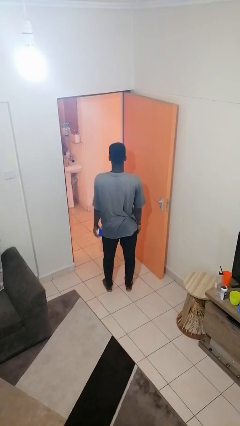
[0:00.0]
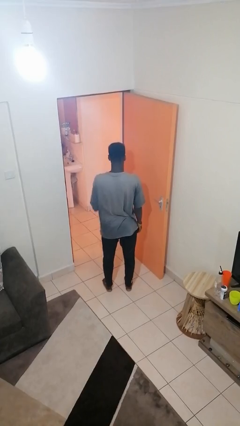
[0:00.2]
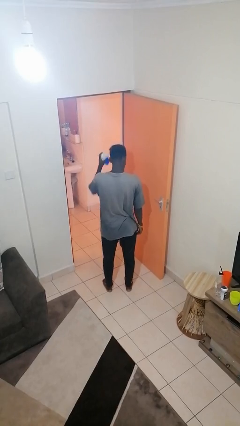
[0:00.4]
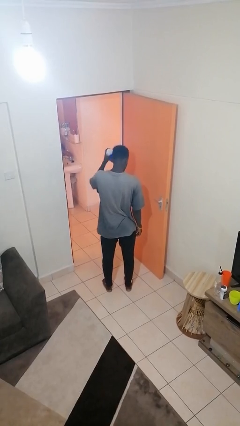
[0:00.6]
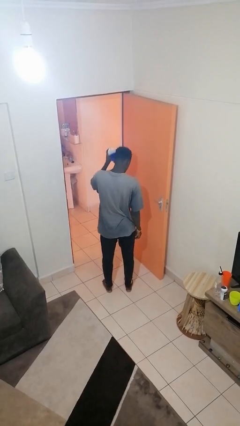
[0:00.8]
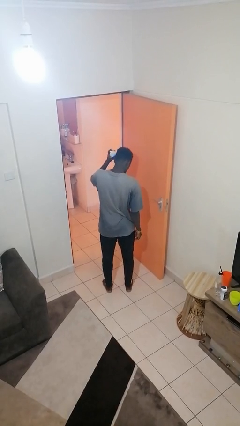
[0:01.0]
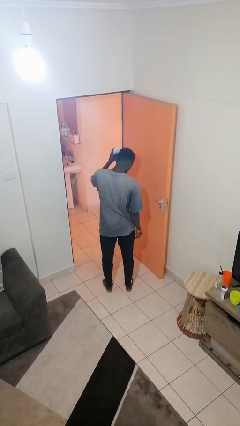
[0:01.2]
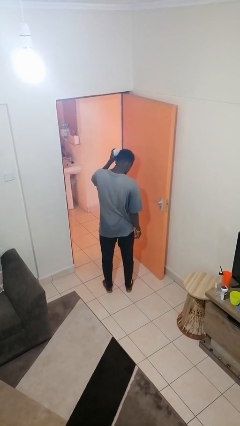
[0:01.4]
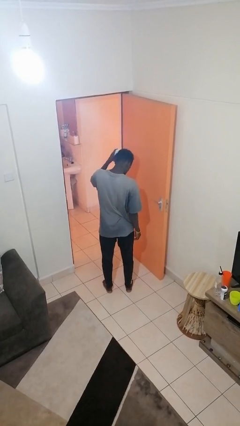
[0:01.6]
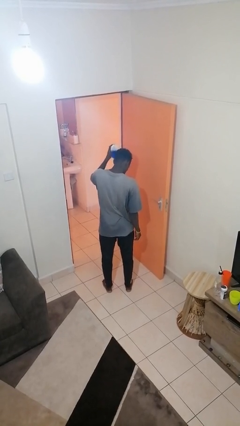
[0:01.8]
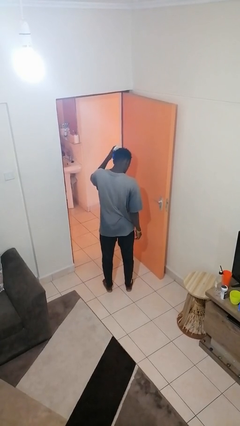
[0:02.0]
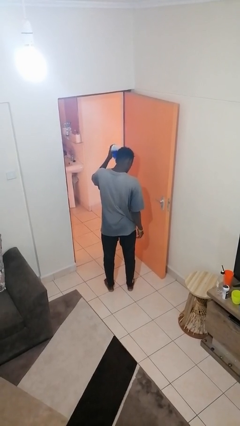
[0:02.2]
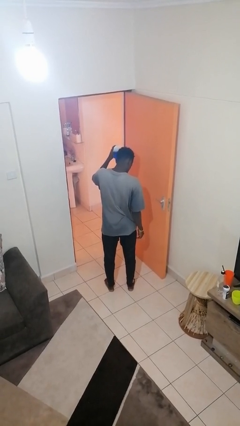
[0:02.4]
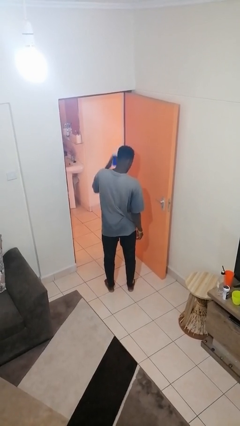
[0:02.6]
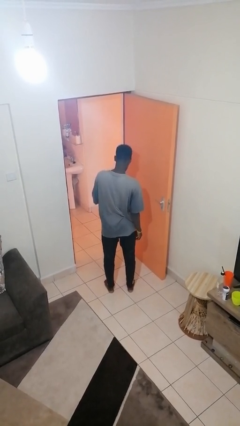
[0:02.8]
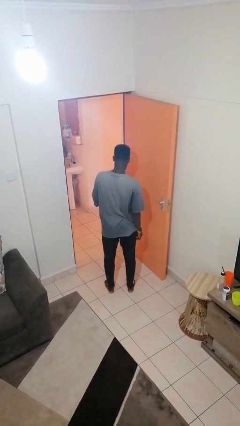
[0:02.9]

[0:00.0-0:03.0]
person brushes hair

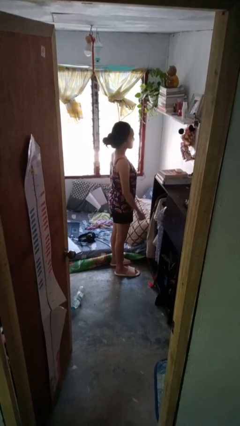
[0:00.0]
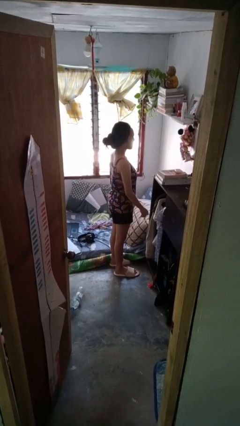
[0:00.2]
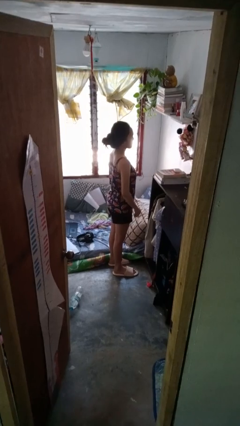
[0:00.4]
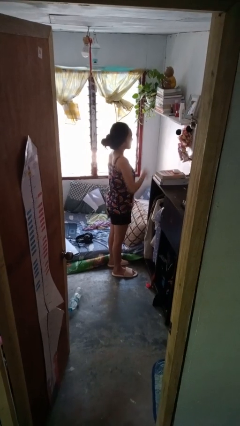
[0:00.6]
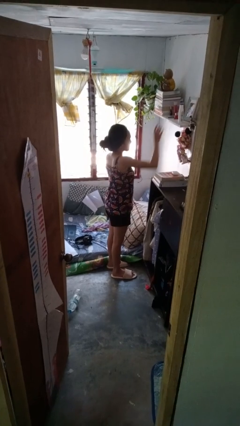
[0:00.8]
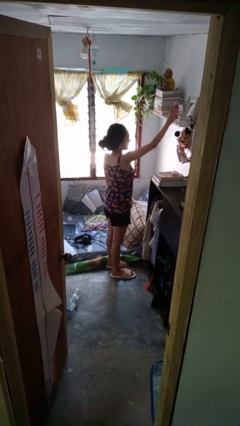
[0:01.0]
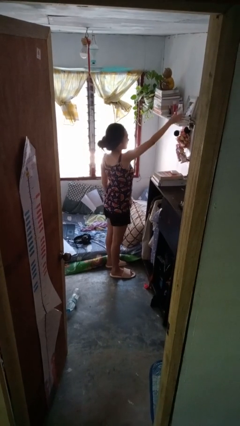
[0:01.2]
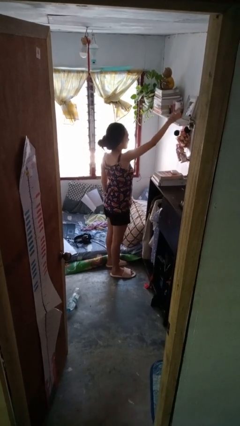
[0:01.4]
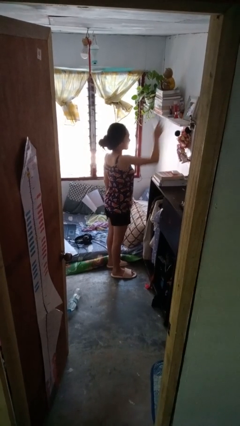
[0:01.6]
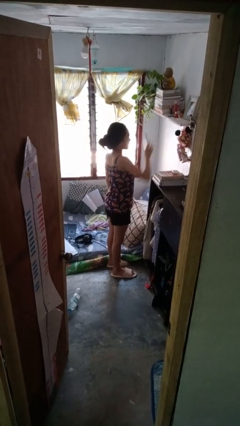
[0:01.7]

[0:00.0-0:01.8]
person picks up object from shelf

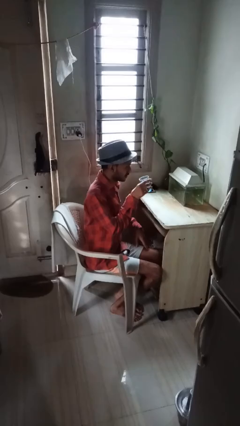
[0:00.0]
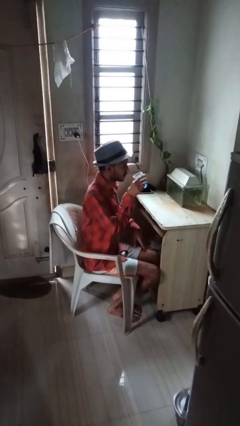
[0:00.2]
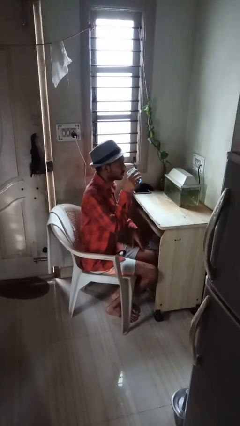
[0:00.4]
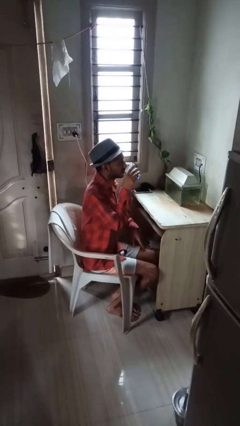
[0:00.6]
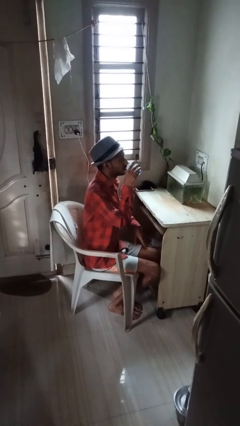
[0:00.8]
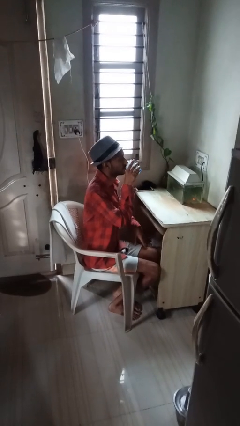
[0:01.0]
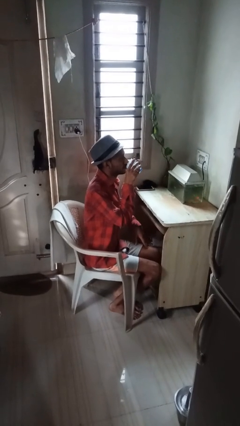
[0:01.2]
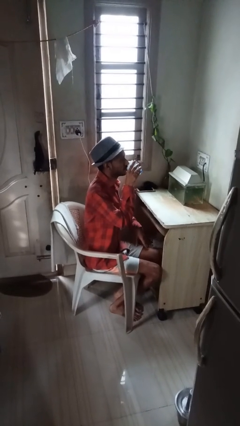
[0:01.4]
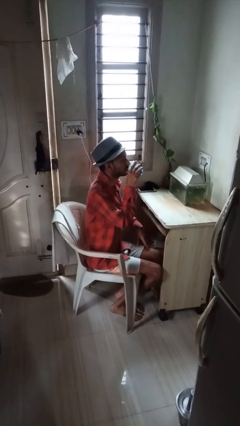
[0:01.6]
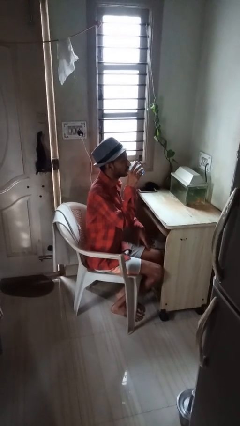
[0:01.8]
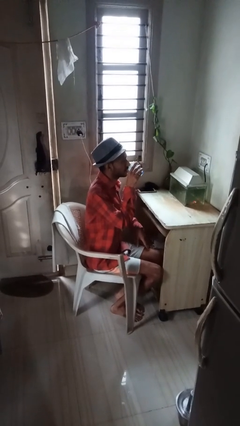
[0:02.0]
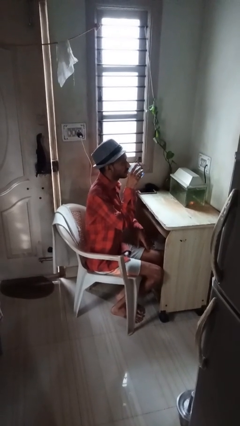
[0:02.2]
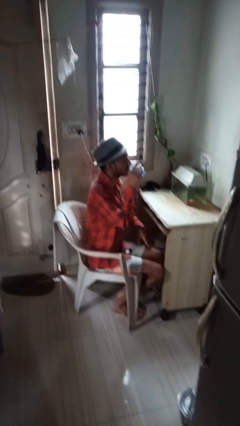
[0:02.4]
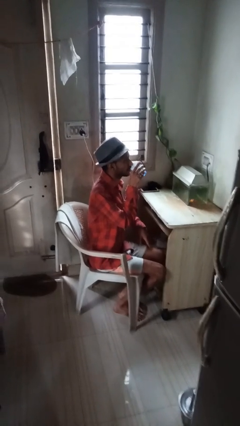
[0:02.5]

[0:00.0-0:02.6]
person drinks from shotglass

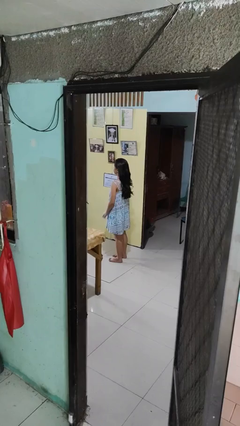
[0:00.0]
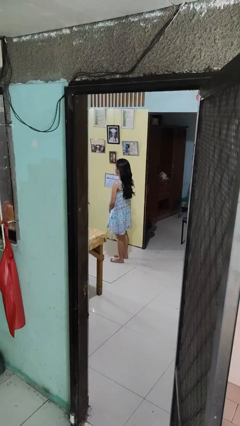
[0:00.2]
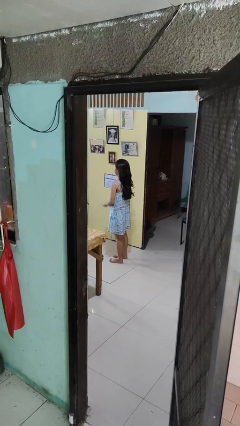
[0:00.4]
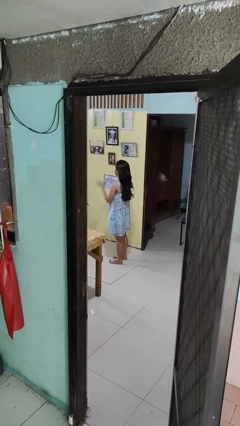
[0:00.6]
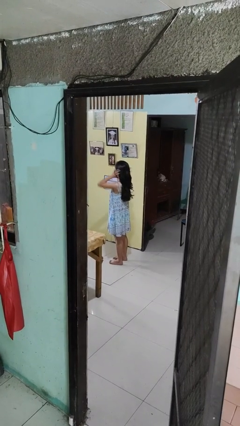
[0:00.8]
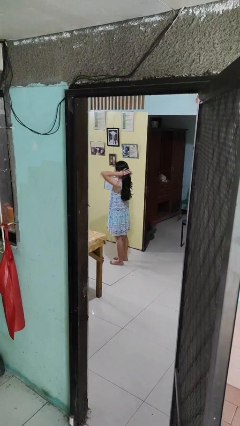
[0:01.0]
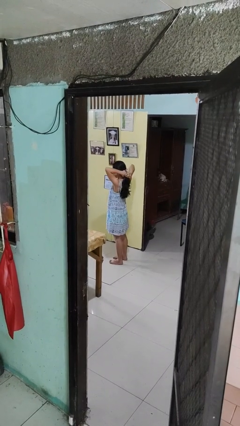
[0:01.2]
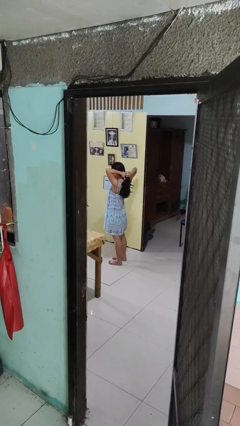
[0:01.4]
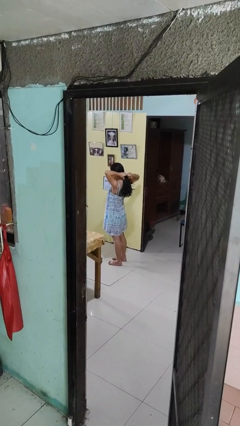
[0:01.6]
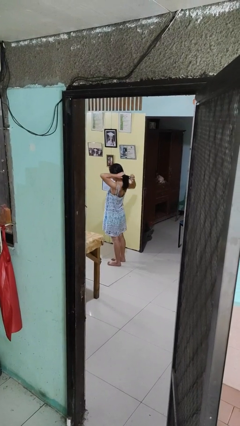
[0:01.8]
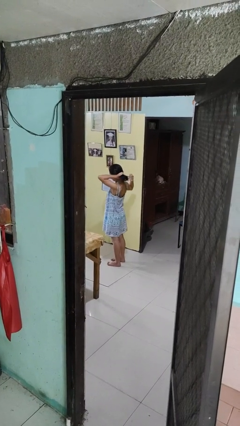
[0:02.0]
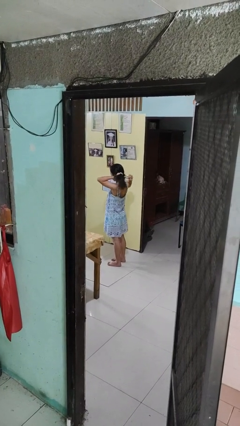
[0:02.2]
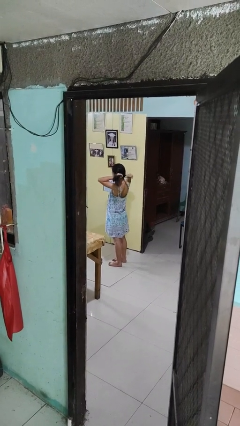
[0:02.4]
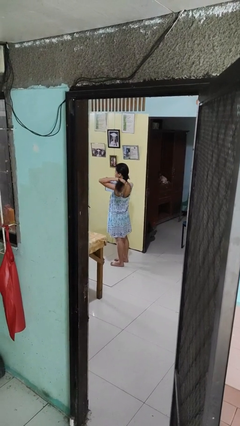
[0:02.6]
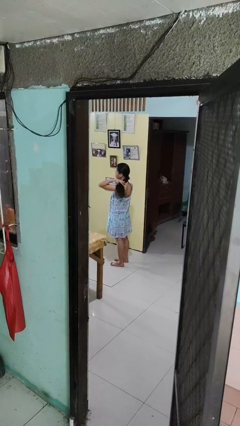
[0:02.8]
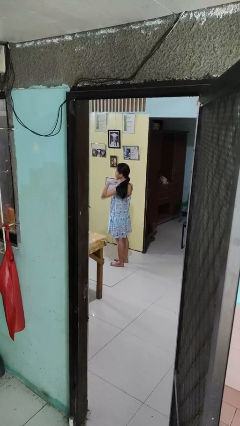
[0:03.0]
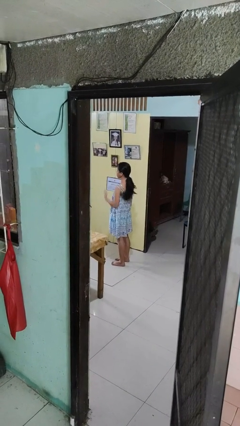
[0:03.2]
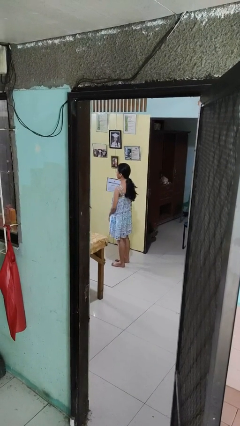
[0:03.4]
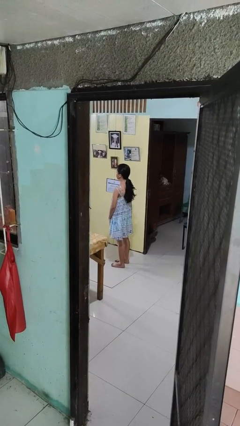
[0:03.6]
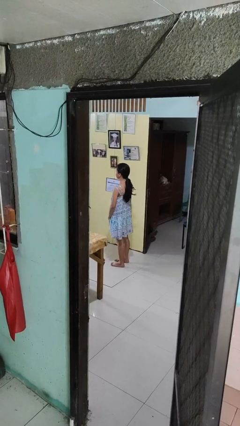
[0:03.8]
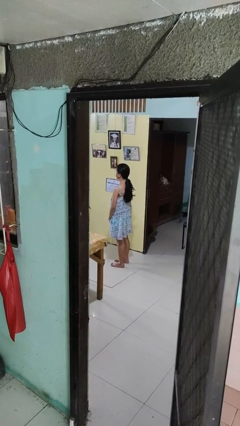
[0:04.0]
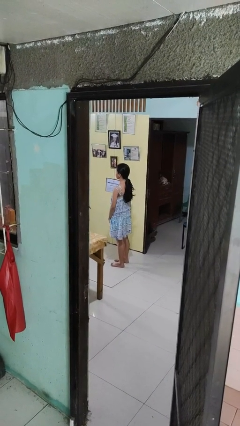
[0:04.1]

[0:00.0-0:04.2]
person puts hair in ponytail

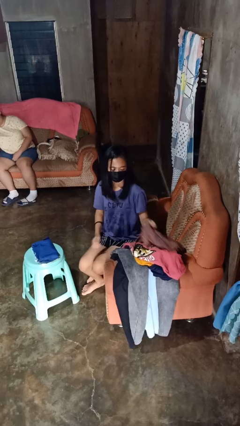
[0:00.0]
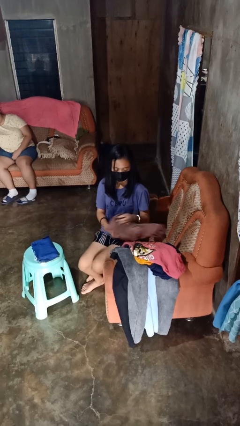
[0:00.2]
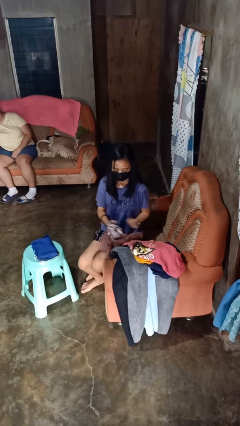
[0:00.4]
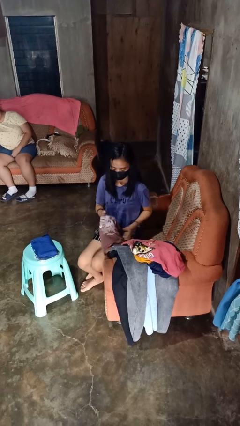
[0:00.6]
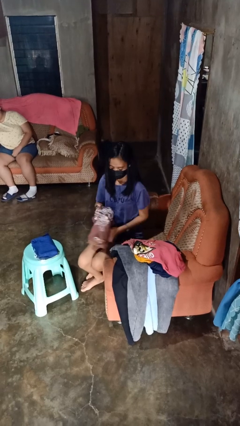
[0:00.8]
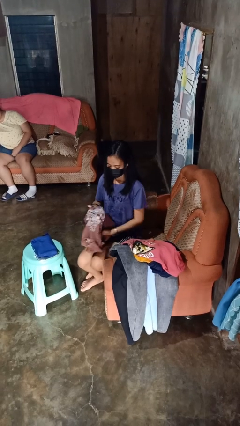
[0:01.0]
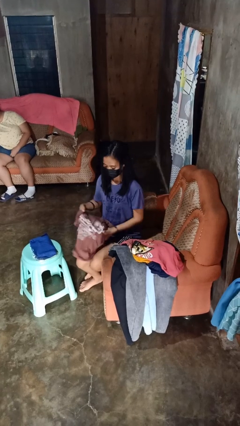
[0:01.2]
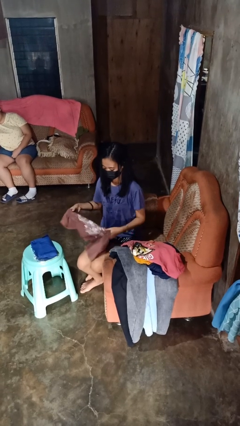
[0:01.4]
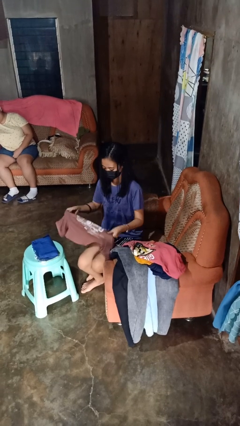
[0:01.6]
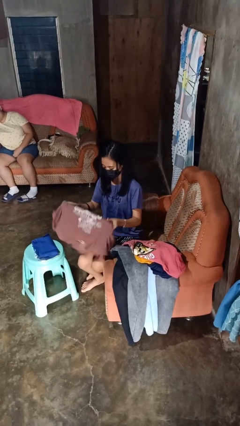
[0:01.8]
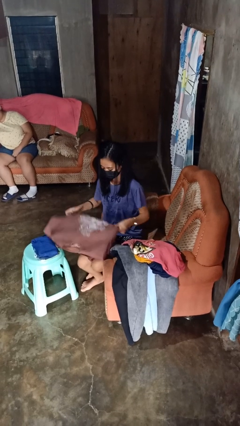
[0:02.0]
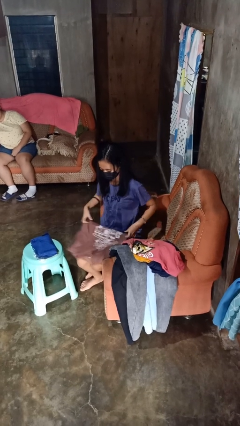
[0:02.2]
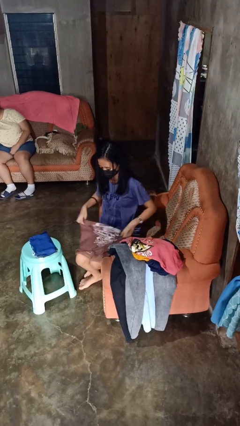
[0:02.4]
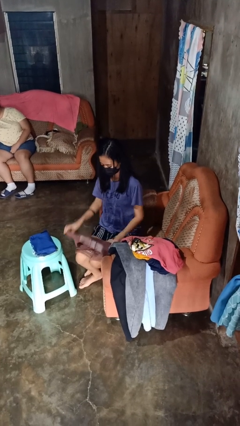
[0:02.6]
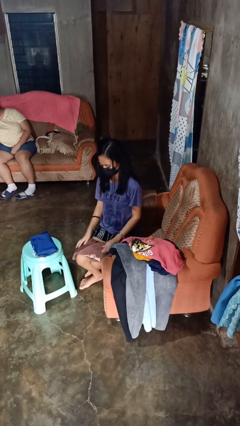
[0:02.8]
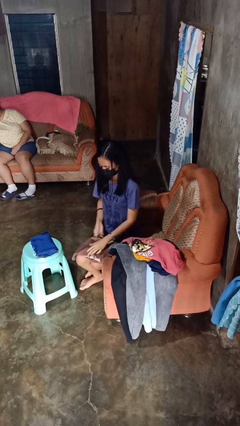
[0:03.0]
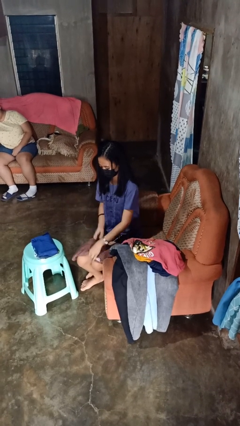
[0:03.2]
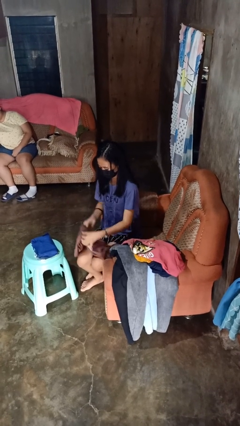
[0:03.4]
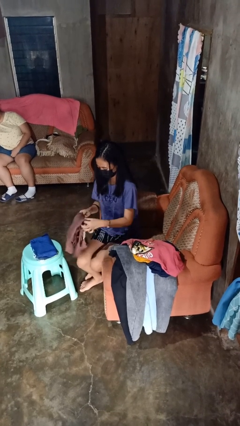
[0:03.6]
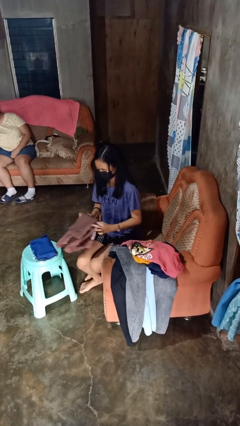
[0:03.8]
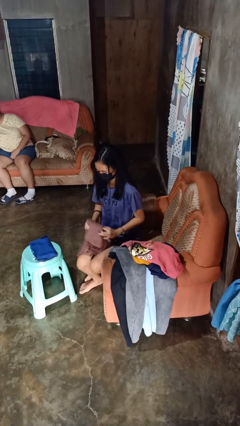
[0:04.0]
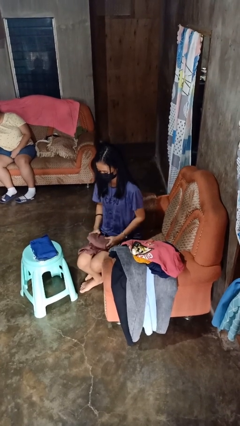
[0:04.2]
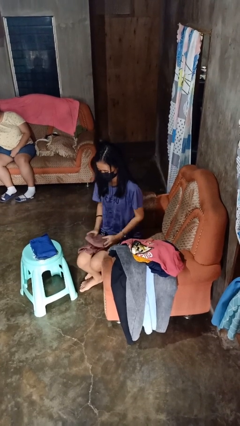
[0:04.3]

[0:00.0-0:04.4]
person folds shirt

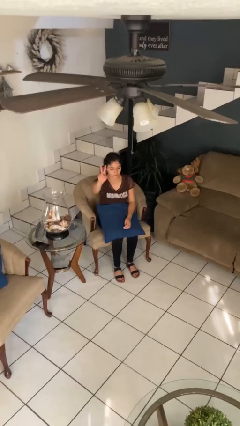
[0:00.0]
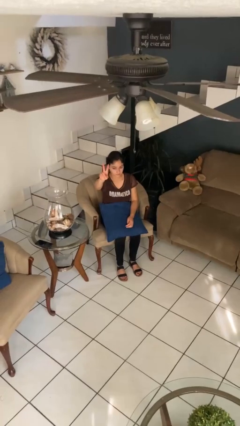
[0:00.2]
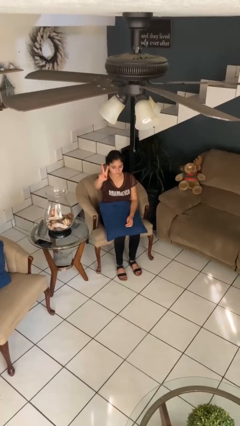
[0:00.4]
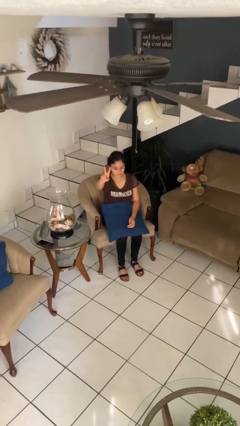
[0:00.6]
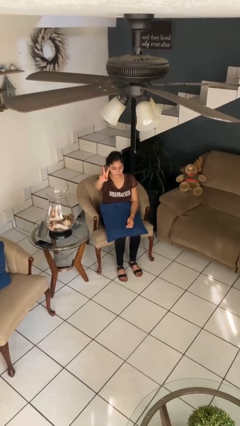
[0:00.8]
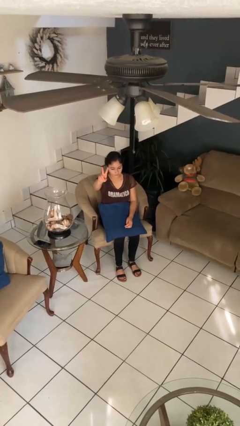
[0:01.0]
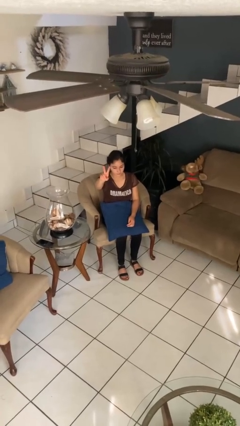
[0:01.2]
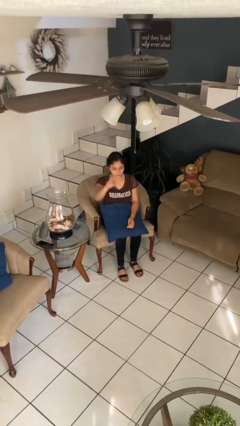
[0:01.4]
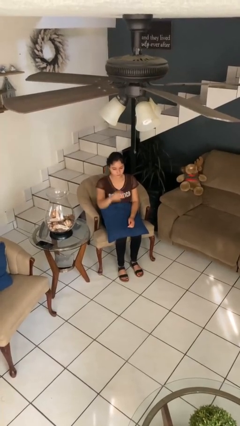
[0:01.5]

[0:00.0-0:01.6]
person gestures peace
